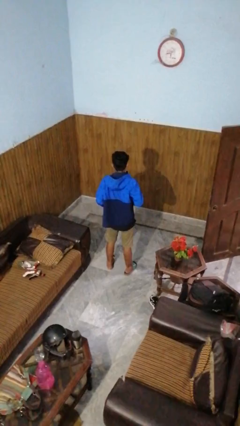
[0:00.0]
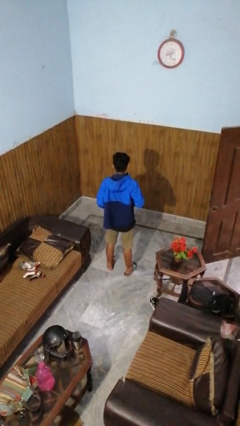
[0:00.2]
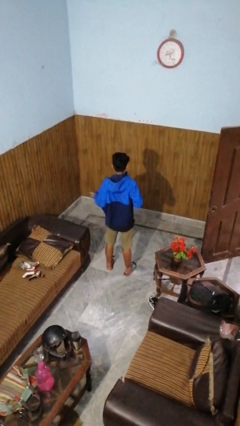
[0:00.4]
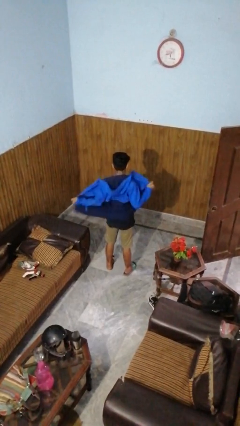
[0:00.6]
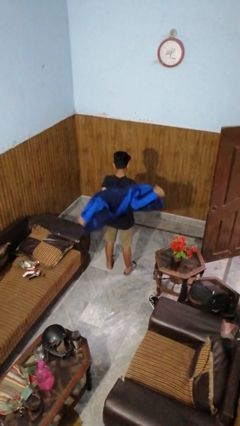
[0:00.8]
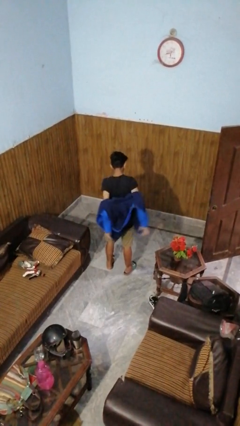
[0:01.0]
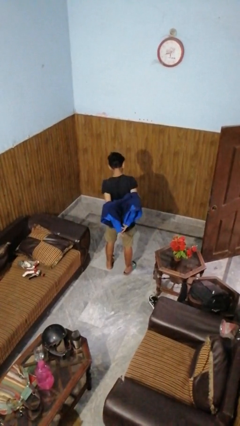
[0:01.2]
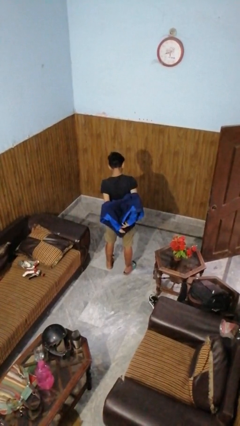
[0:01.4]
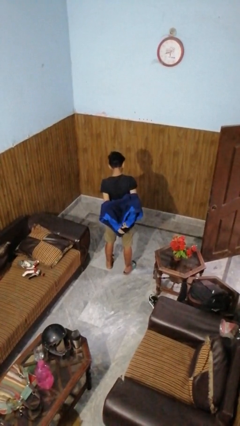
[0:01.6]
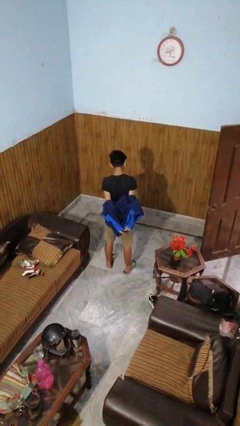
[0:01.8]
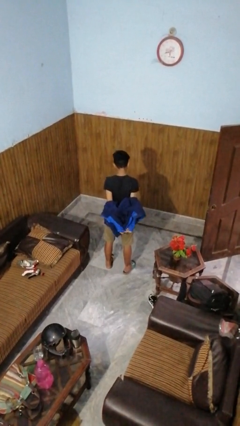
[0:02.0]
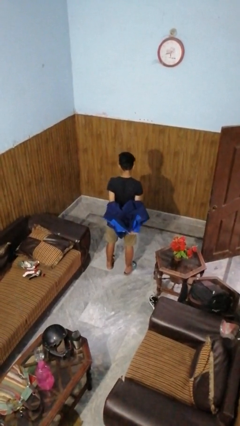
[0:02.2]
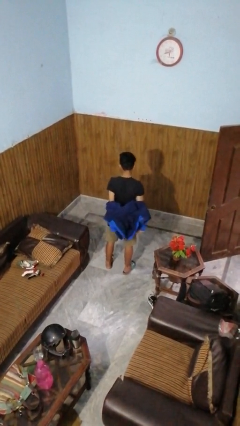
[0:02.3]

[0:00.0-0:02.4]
person takes off jacket

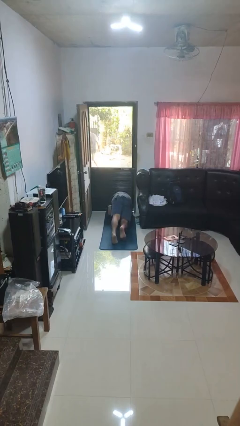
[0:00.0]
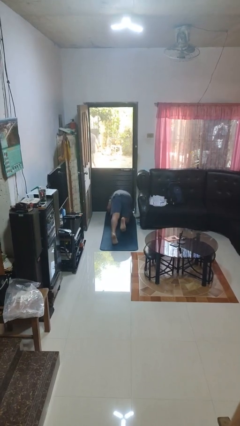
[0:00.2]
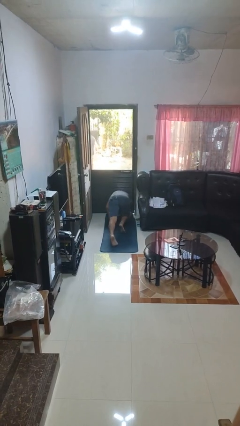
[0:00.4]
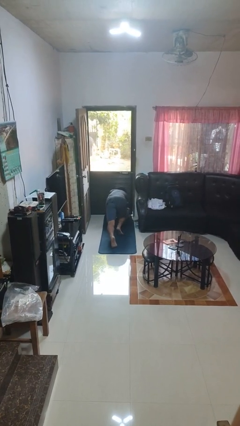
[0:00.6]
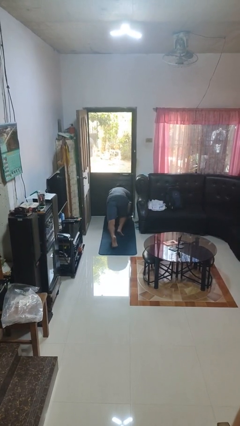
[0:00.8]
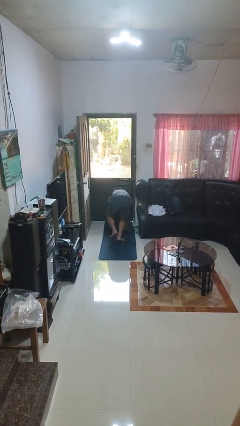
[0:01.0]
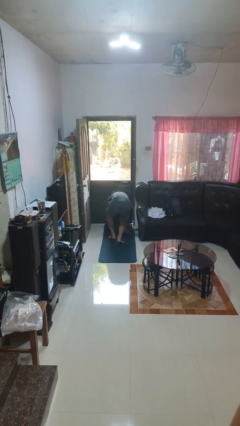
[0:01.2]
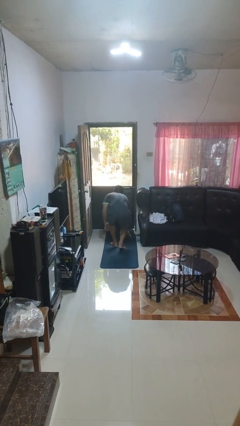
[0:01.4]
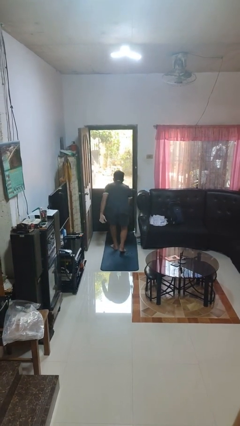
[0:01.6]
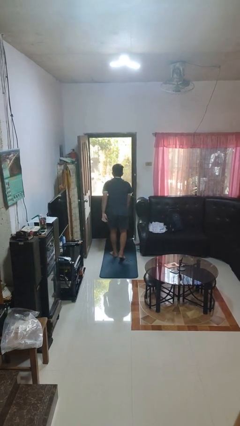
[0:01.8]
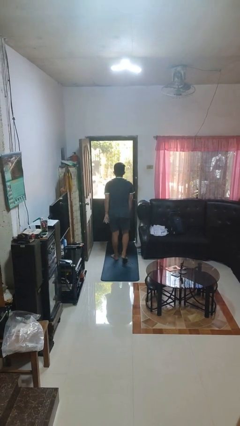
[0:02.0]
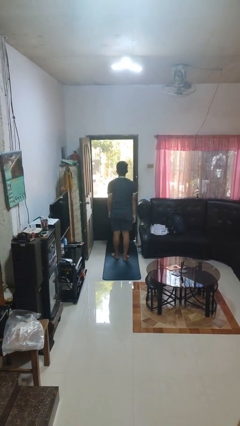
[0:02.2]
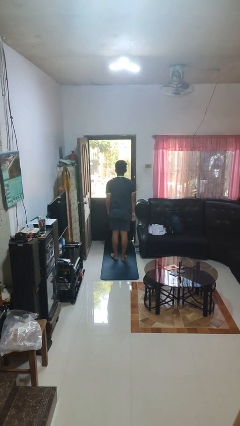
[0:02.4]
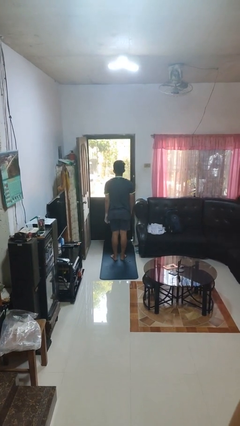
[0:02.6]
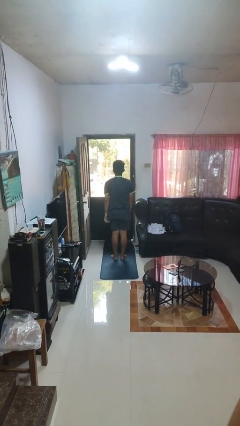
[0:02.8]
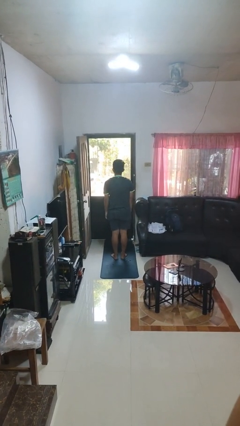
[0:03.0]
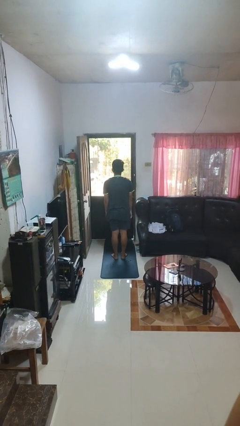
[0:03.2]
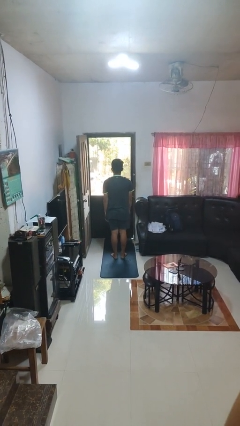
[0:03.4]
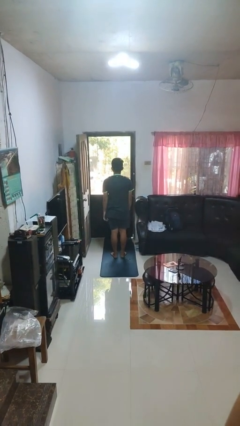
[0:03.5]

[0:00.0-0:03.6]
person stands up from floor

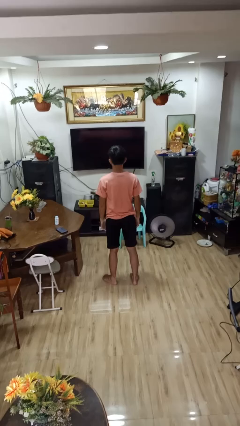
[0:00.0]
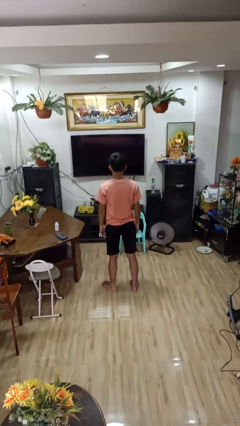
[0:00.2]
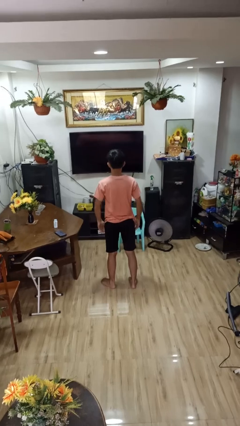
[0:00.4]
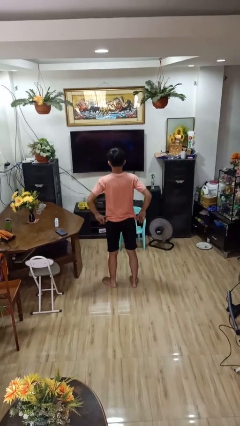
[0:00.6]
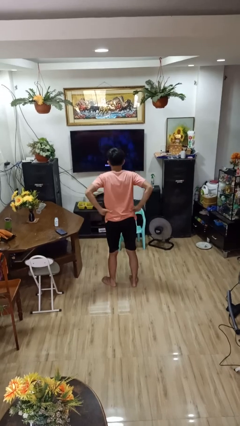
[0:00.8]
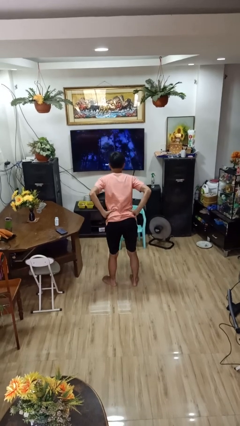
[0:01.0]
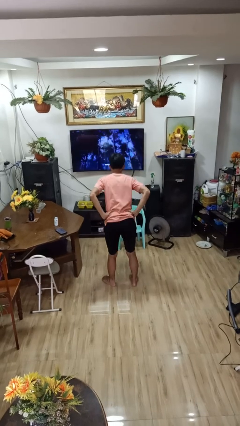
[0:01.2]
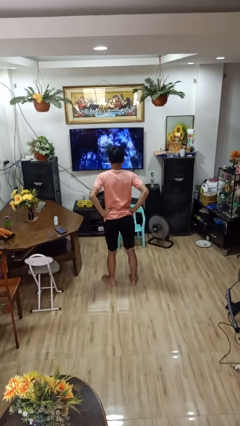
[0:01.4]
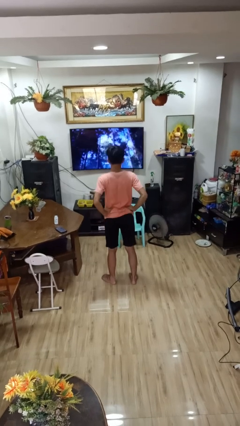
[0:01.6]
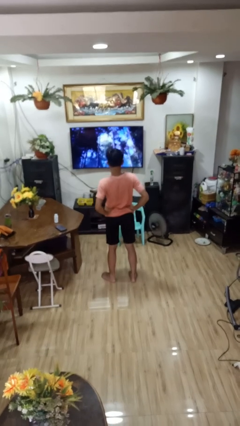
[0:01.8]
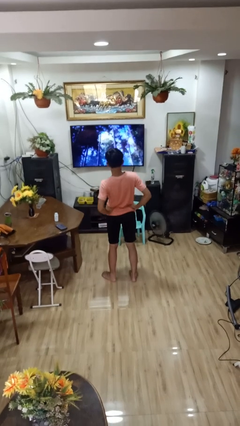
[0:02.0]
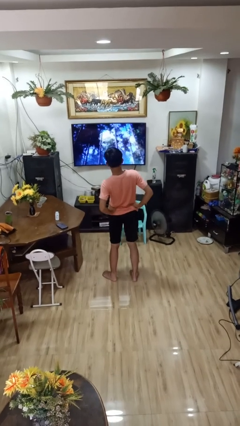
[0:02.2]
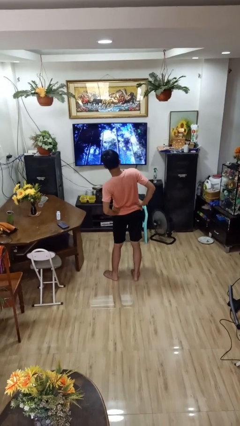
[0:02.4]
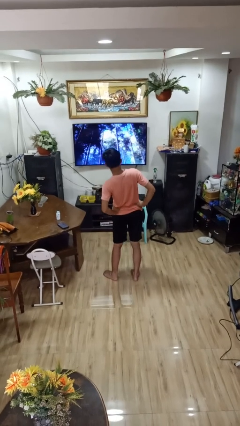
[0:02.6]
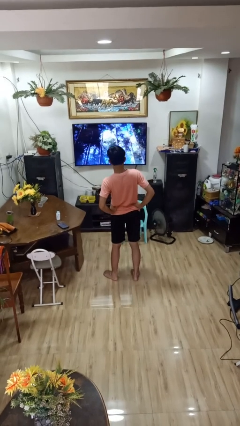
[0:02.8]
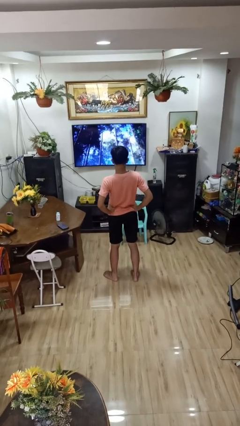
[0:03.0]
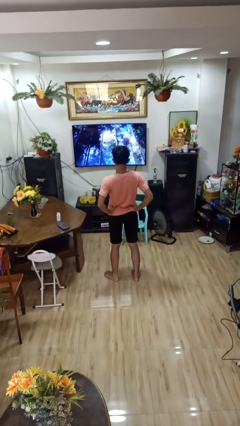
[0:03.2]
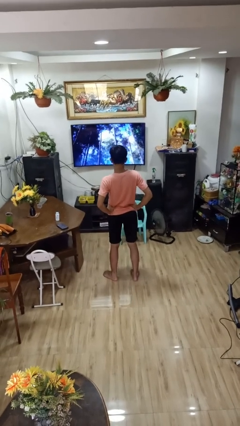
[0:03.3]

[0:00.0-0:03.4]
person stretches back

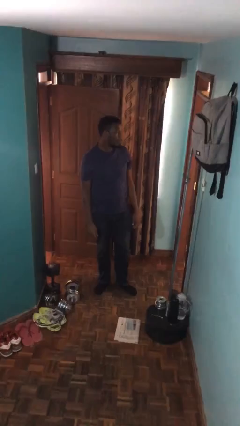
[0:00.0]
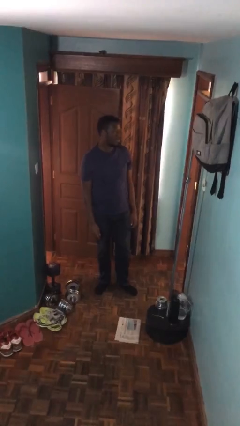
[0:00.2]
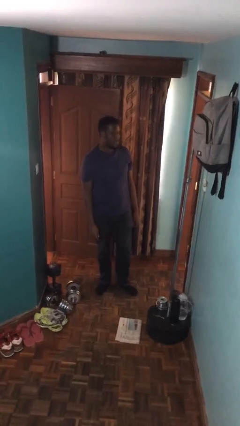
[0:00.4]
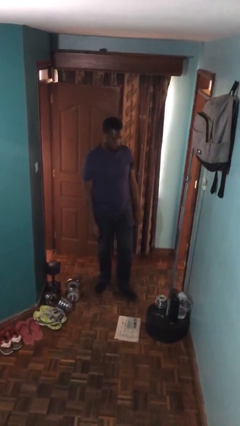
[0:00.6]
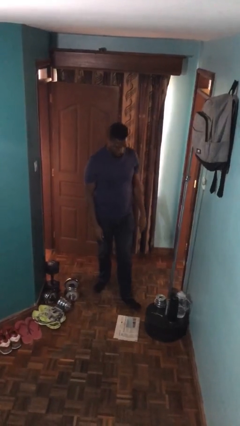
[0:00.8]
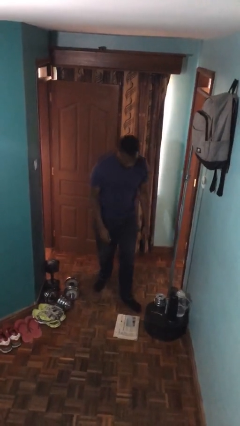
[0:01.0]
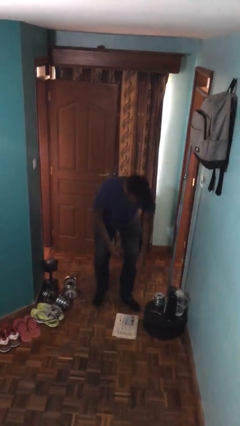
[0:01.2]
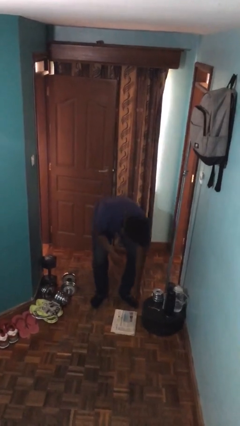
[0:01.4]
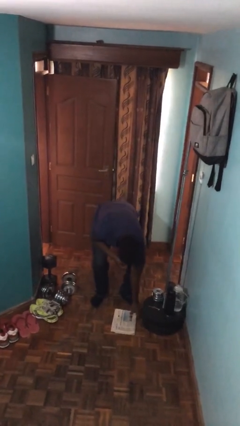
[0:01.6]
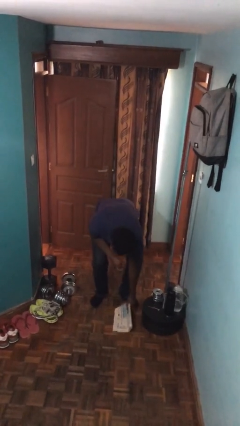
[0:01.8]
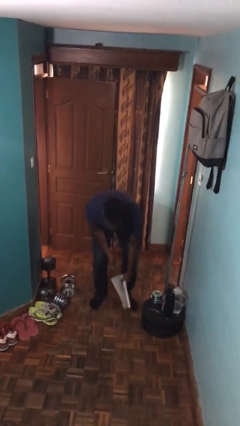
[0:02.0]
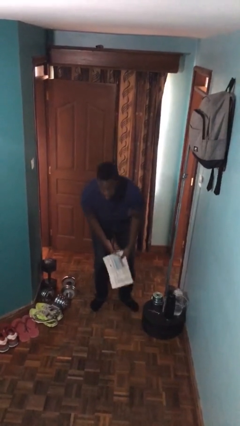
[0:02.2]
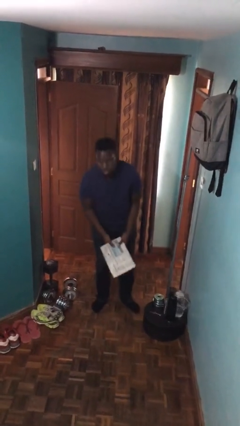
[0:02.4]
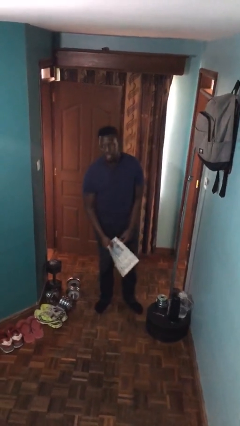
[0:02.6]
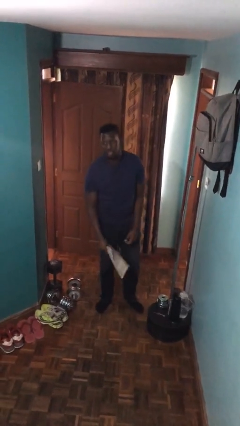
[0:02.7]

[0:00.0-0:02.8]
person picks up object from floor

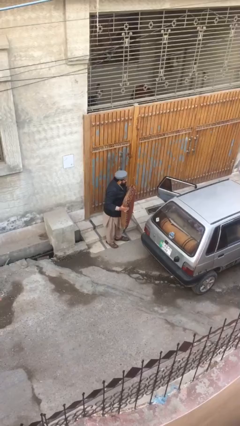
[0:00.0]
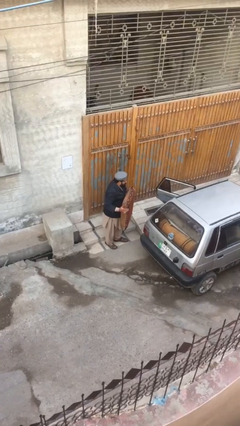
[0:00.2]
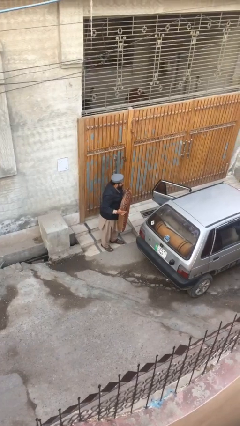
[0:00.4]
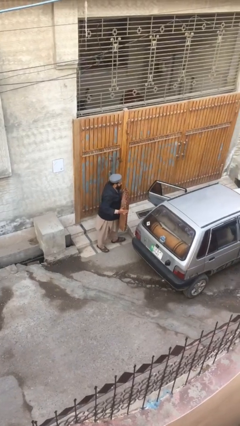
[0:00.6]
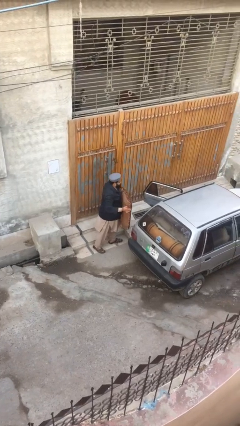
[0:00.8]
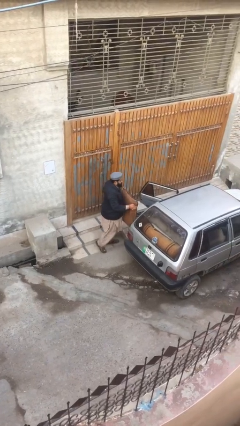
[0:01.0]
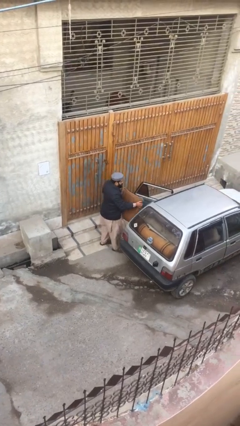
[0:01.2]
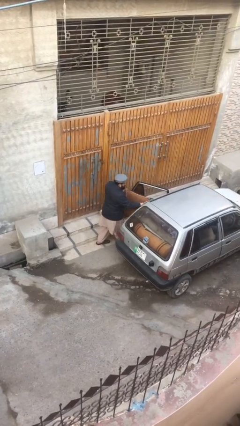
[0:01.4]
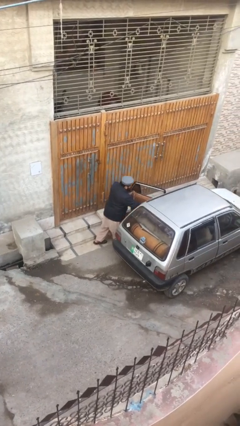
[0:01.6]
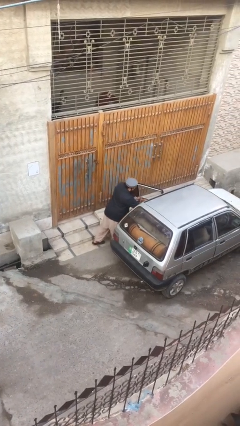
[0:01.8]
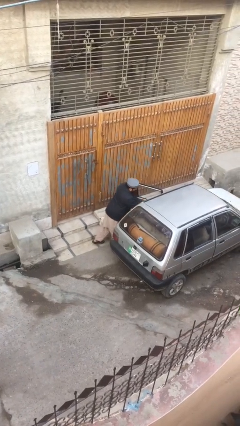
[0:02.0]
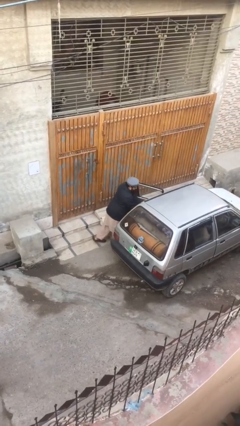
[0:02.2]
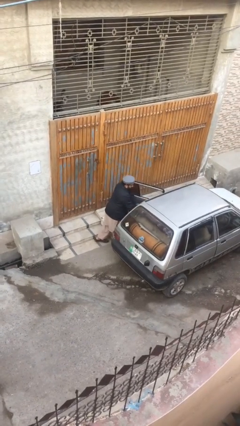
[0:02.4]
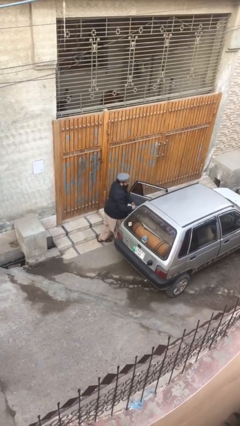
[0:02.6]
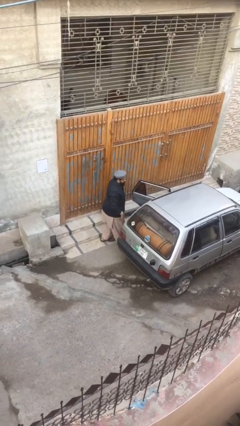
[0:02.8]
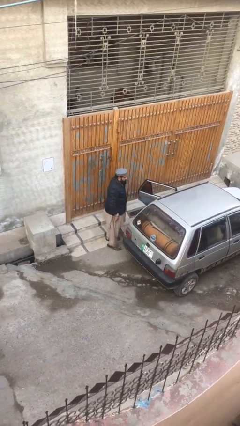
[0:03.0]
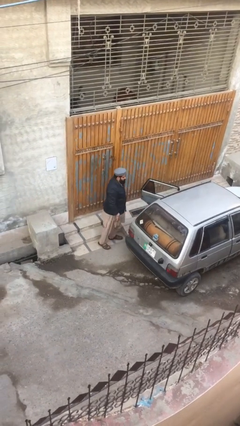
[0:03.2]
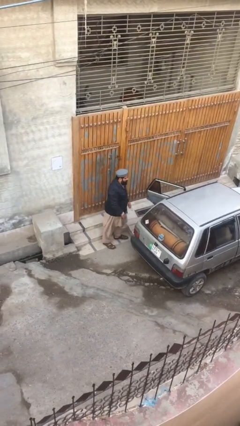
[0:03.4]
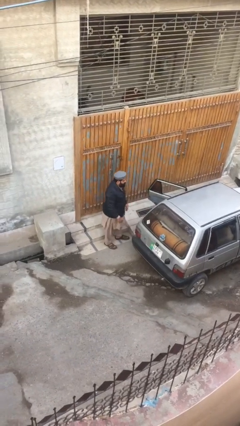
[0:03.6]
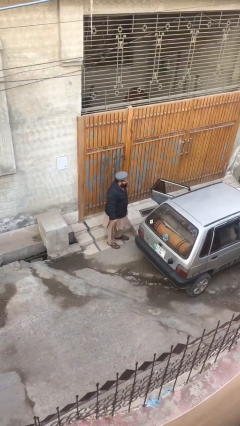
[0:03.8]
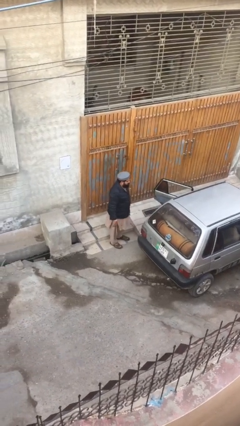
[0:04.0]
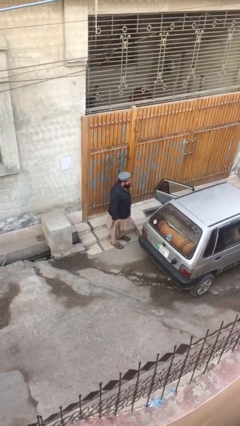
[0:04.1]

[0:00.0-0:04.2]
person loads car

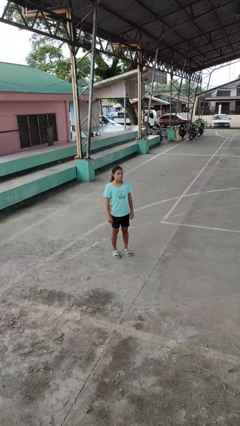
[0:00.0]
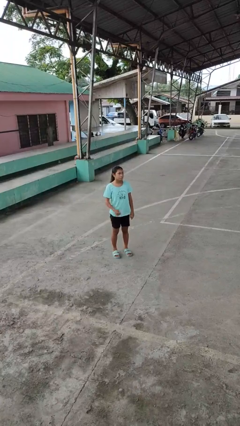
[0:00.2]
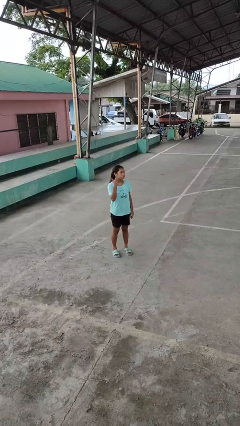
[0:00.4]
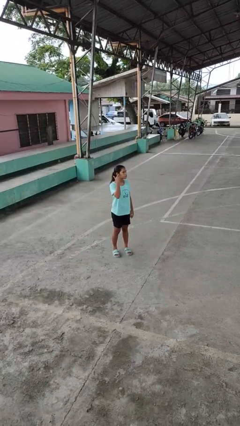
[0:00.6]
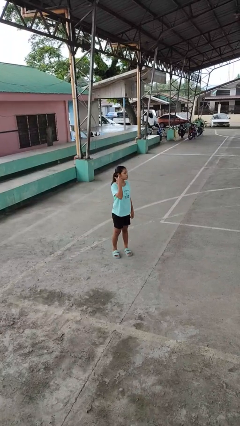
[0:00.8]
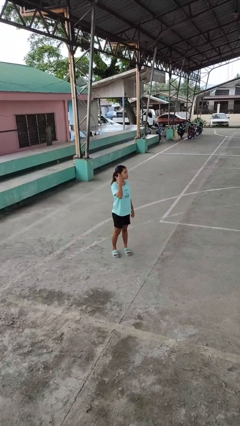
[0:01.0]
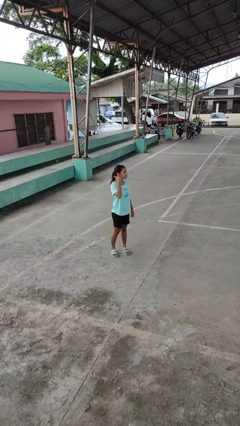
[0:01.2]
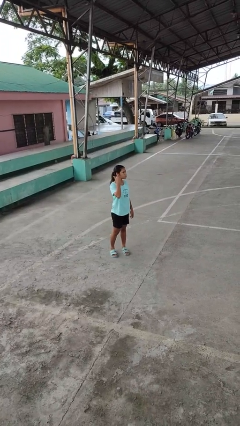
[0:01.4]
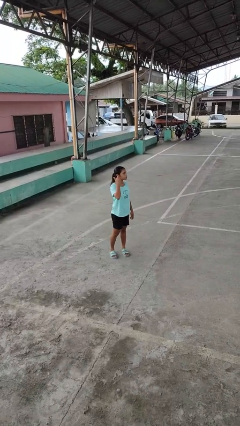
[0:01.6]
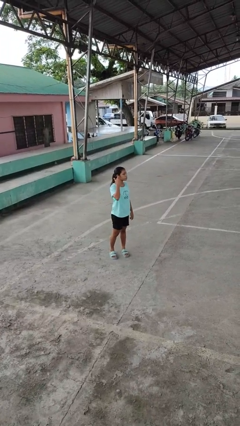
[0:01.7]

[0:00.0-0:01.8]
person gestures listen closely
